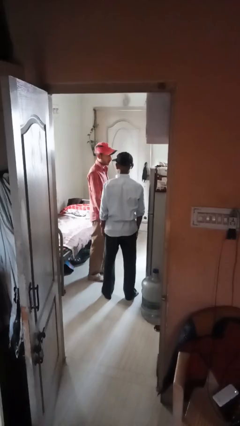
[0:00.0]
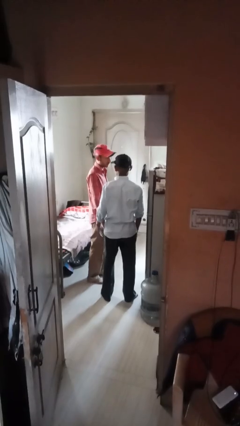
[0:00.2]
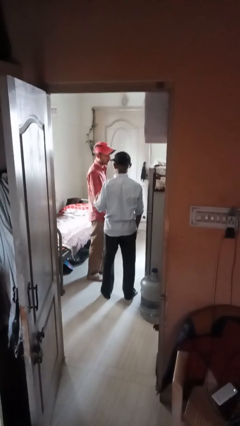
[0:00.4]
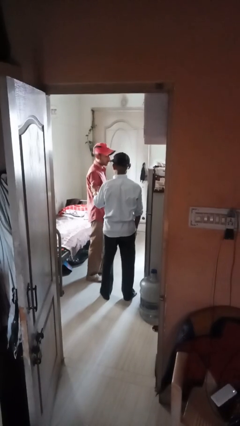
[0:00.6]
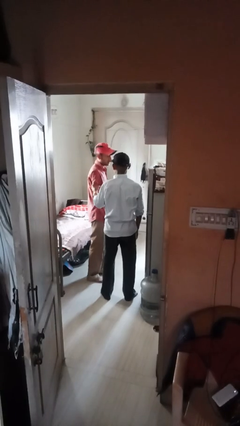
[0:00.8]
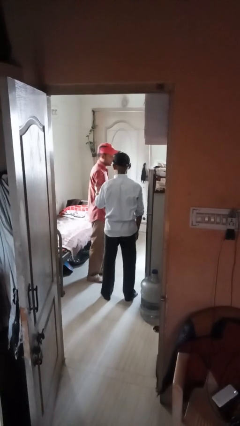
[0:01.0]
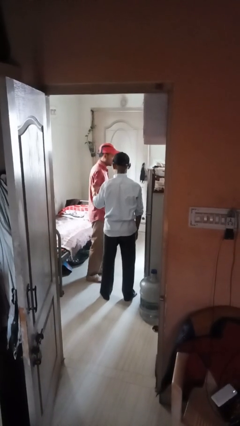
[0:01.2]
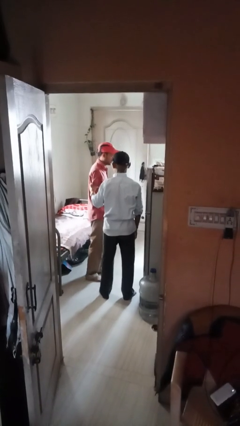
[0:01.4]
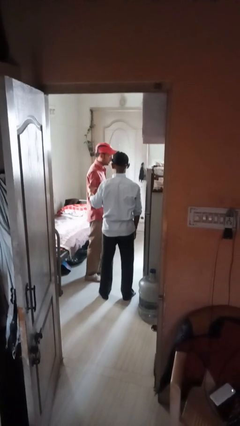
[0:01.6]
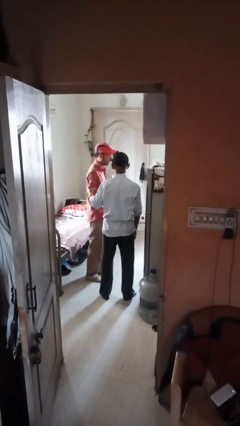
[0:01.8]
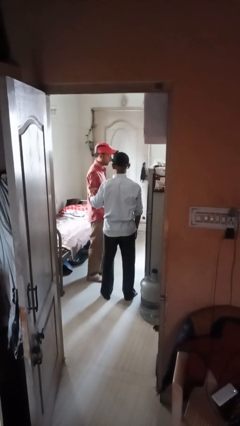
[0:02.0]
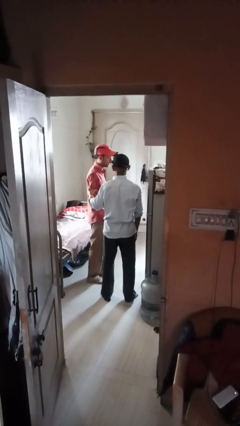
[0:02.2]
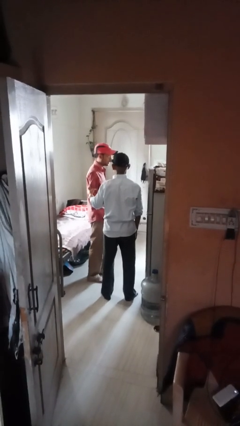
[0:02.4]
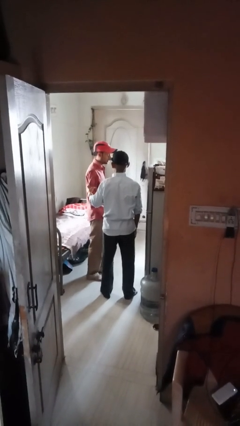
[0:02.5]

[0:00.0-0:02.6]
person spins person around

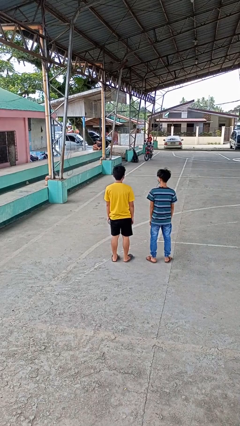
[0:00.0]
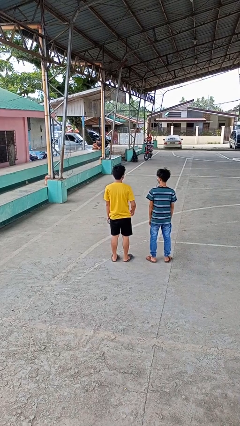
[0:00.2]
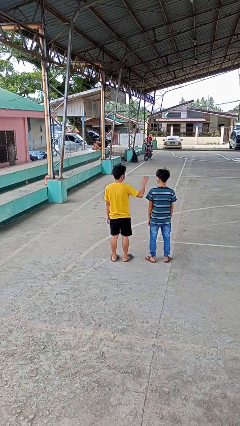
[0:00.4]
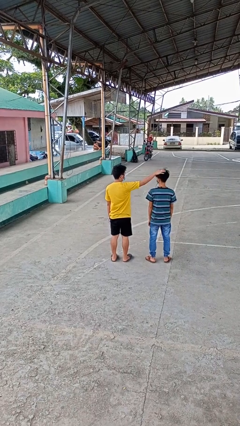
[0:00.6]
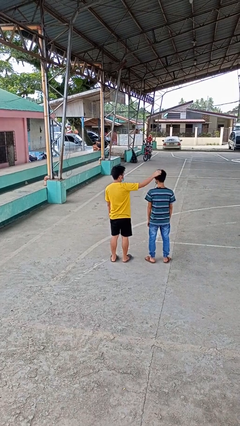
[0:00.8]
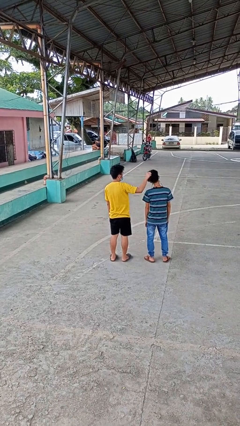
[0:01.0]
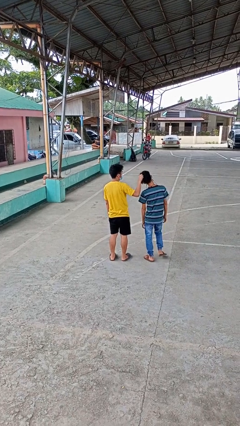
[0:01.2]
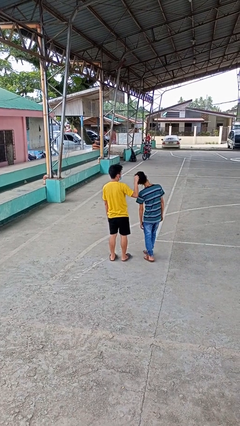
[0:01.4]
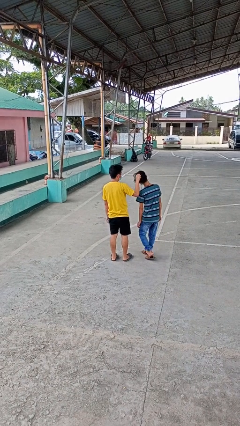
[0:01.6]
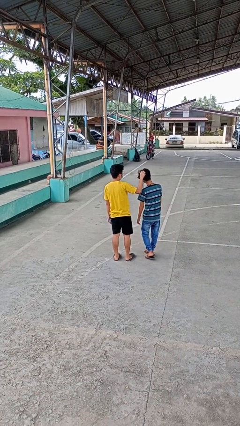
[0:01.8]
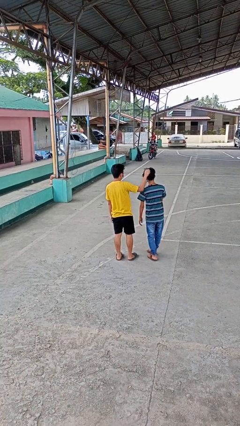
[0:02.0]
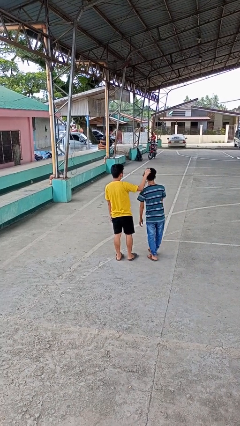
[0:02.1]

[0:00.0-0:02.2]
person grabs person by hair

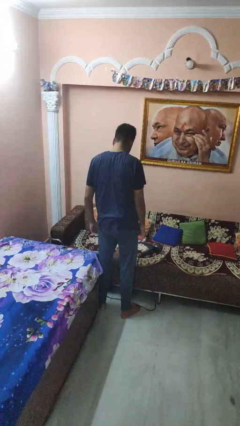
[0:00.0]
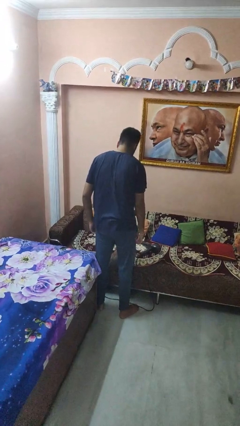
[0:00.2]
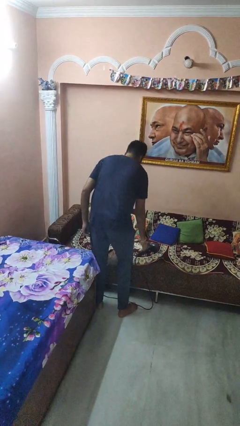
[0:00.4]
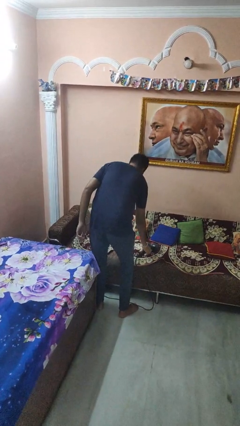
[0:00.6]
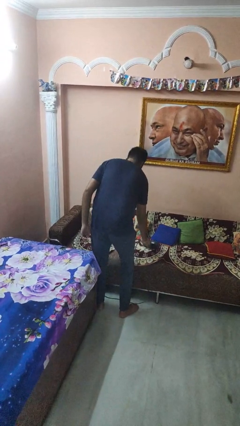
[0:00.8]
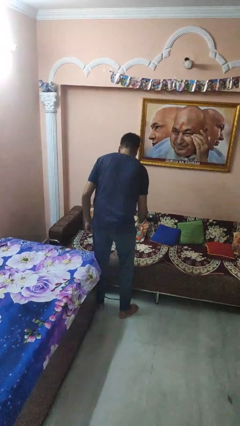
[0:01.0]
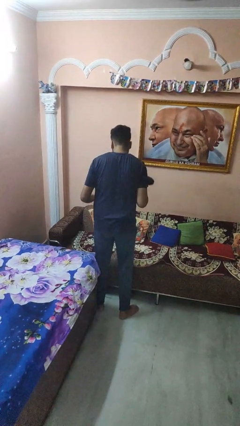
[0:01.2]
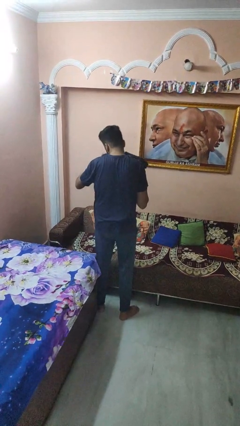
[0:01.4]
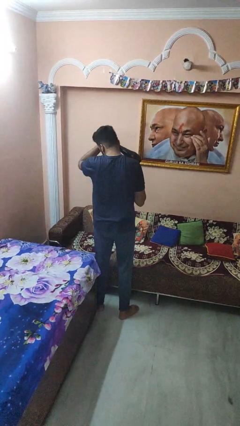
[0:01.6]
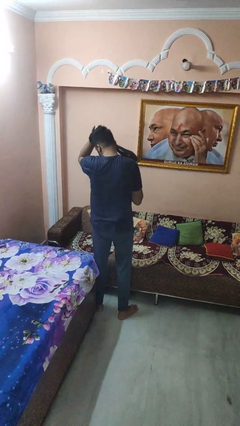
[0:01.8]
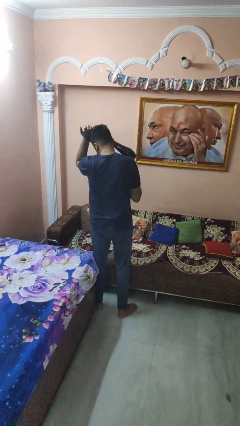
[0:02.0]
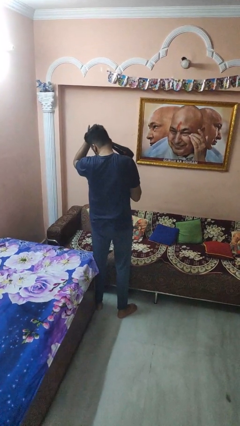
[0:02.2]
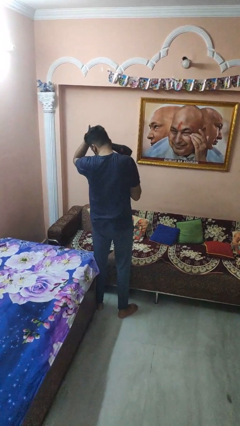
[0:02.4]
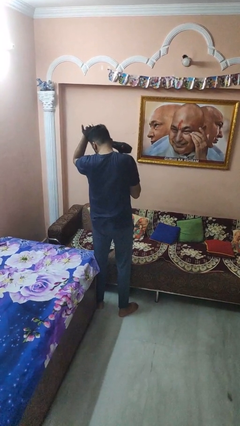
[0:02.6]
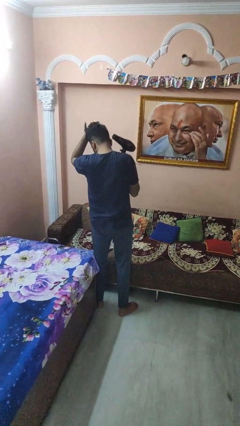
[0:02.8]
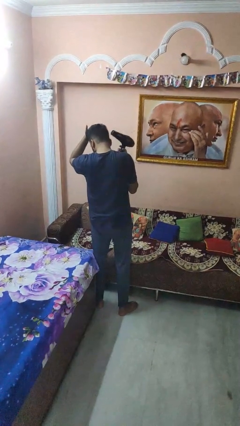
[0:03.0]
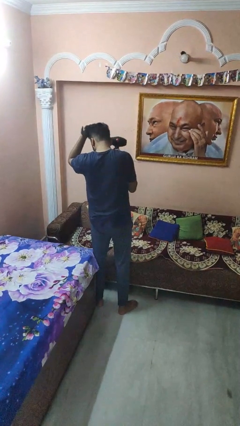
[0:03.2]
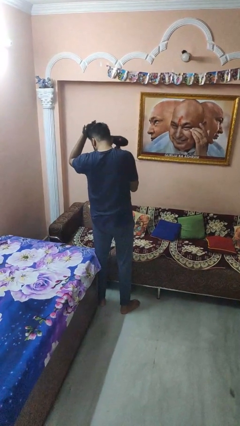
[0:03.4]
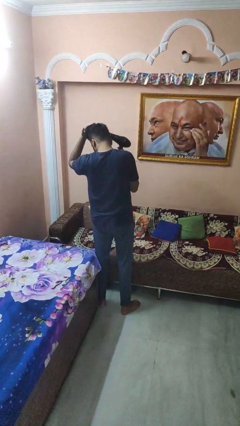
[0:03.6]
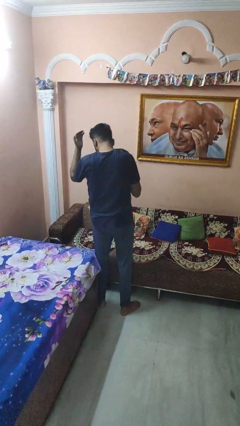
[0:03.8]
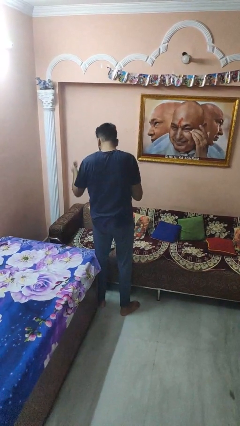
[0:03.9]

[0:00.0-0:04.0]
person dries hair with hairdryer

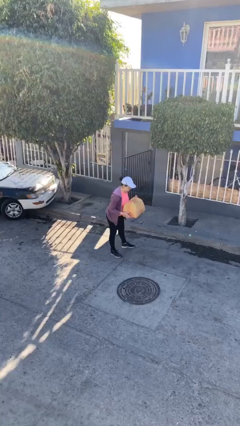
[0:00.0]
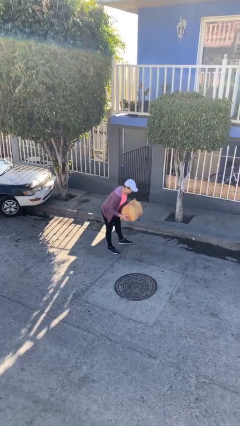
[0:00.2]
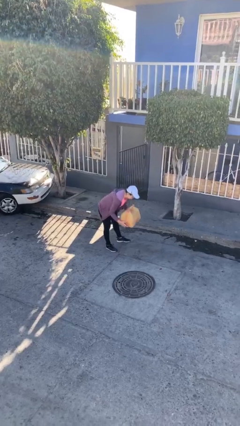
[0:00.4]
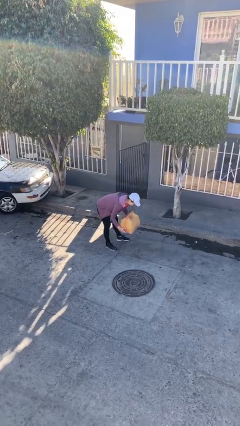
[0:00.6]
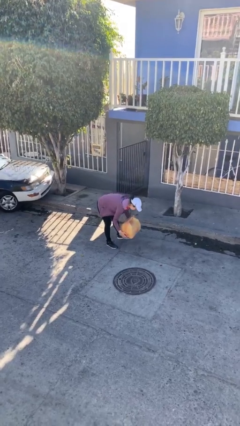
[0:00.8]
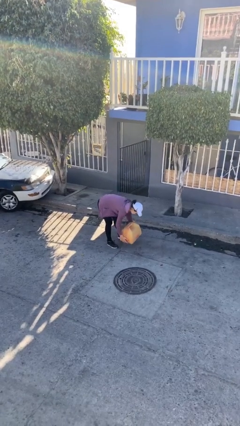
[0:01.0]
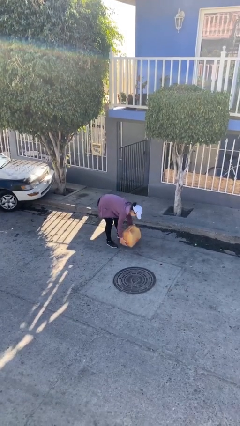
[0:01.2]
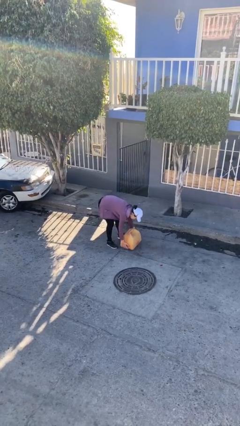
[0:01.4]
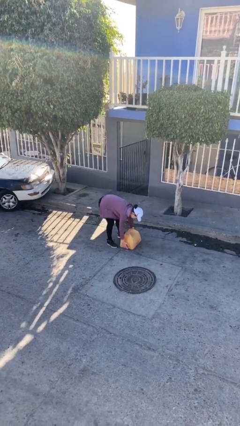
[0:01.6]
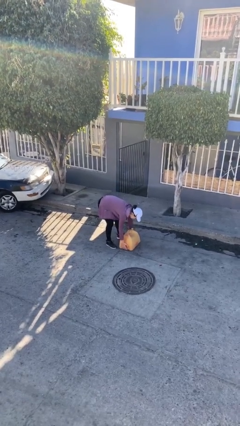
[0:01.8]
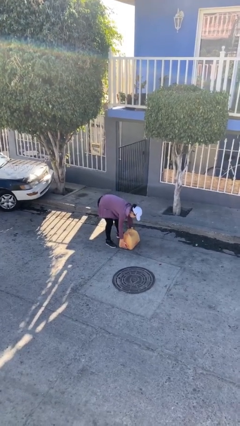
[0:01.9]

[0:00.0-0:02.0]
person puts down object on floor

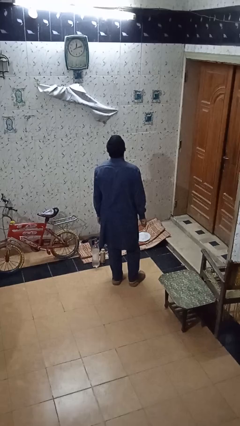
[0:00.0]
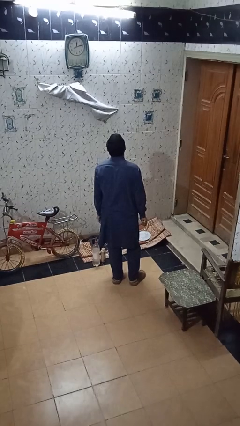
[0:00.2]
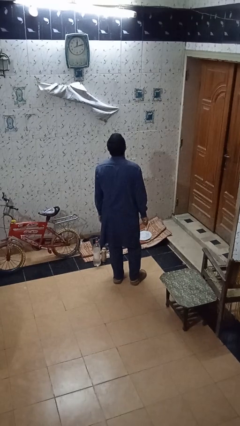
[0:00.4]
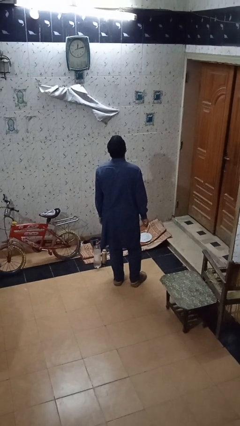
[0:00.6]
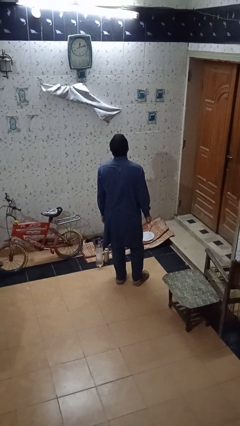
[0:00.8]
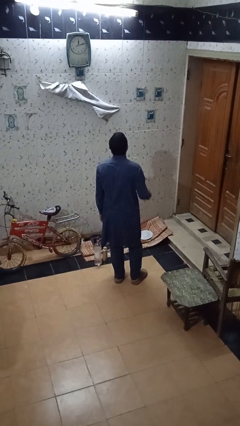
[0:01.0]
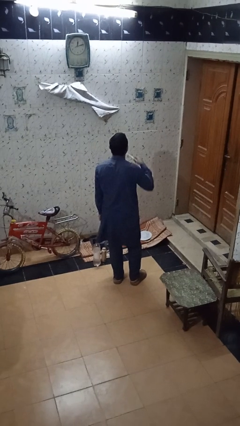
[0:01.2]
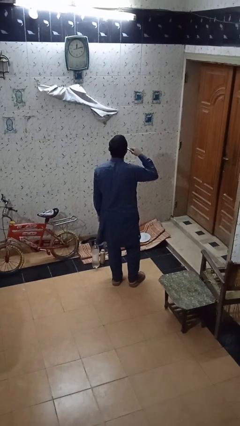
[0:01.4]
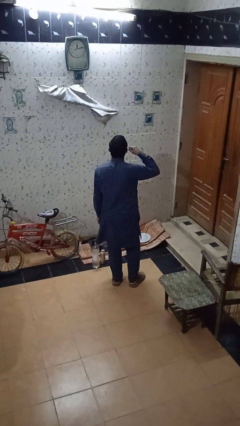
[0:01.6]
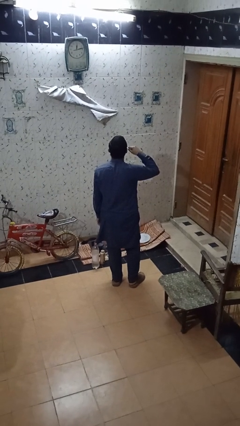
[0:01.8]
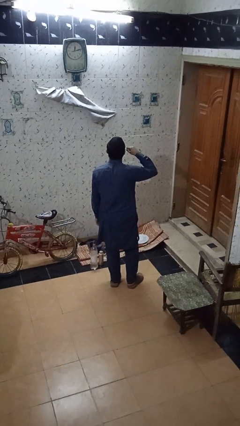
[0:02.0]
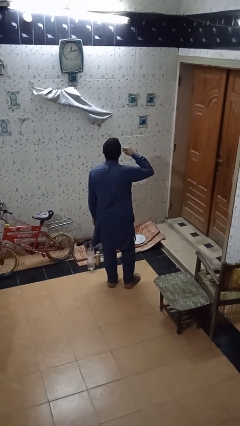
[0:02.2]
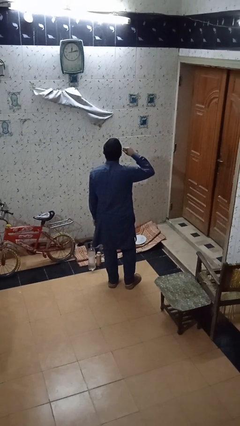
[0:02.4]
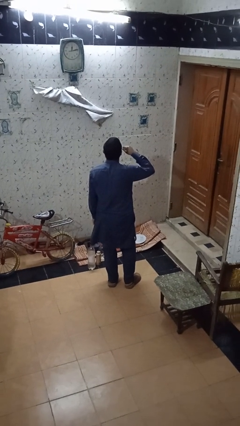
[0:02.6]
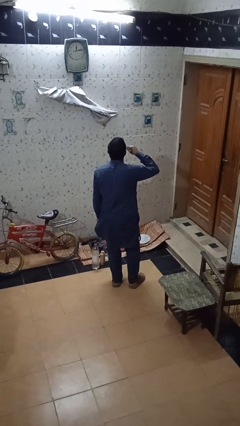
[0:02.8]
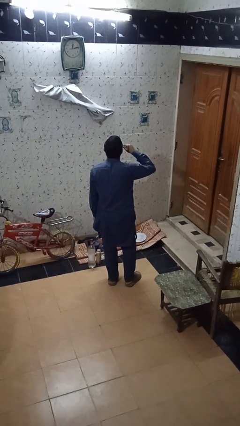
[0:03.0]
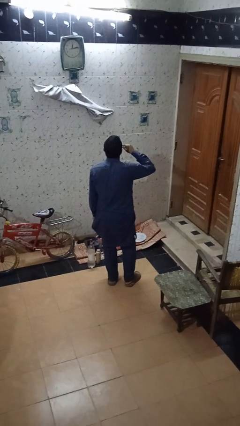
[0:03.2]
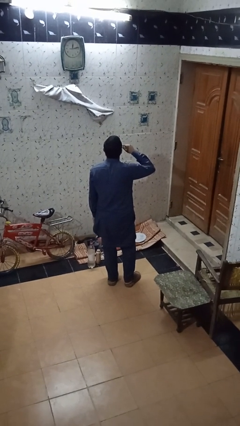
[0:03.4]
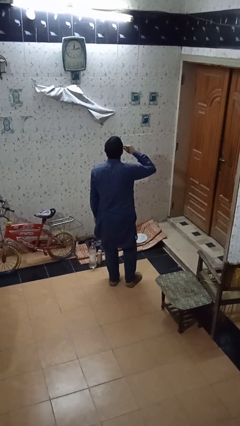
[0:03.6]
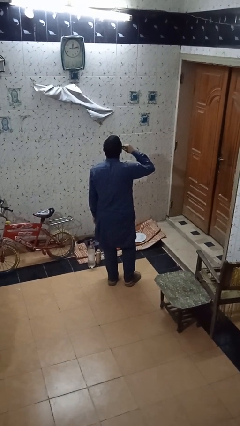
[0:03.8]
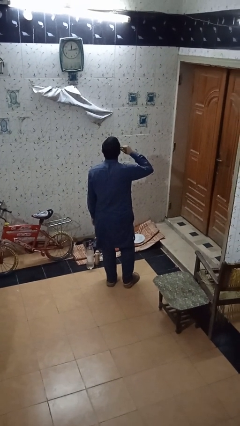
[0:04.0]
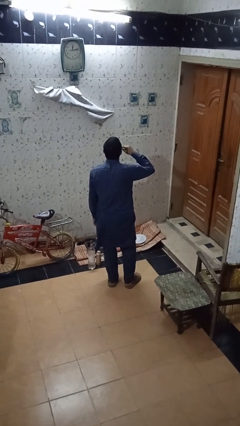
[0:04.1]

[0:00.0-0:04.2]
person brushes teeth

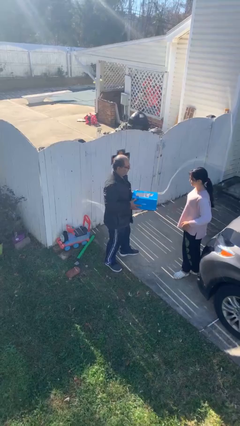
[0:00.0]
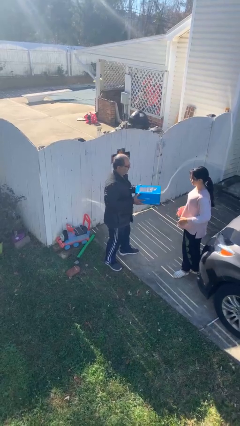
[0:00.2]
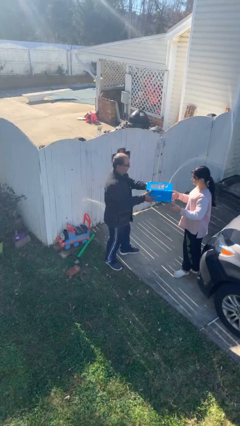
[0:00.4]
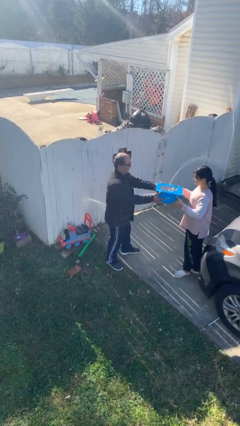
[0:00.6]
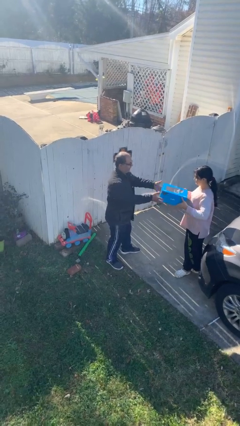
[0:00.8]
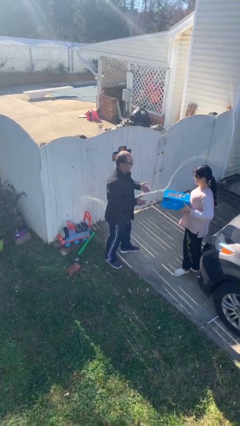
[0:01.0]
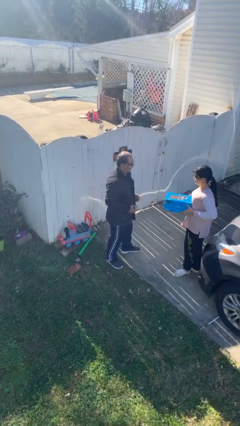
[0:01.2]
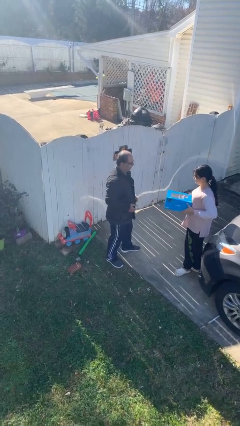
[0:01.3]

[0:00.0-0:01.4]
person transfers object to person

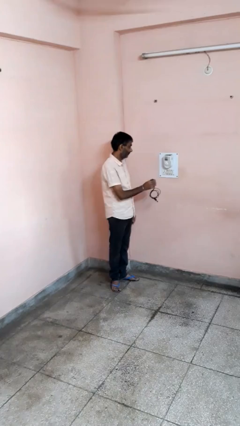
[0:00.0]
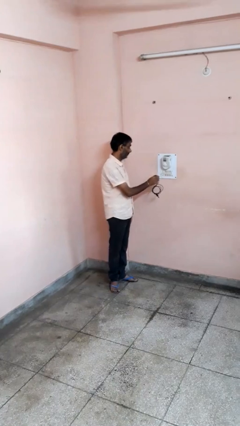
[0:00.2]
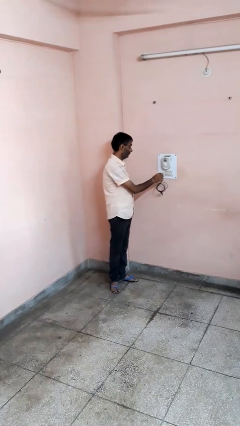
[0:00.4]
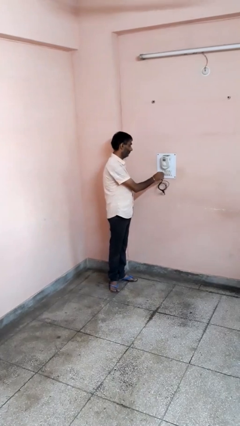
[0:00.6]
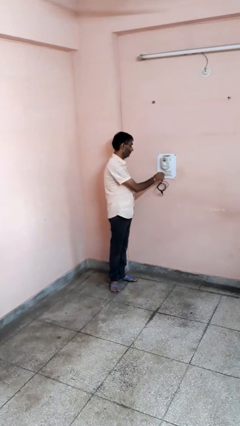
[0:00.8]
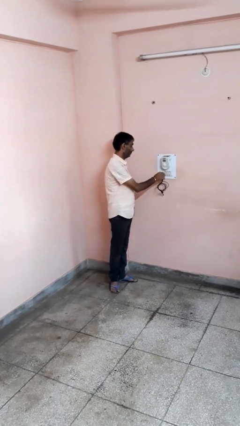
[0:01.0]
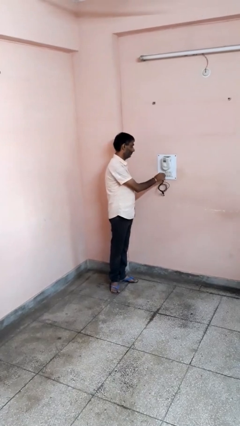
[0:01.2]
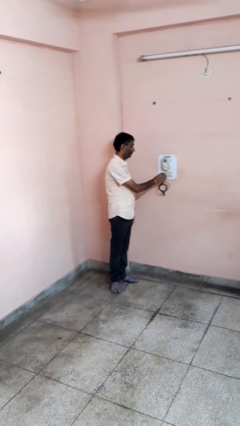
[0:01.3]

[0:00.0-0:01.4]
person plugs into electrical socket
